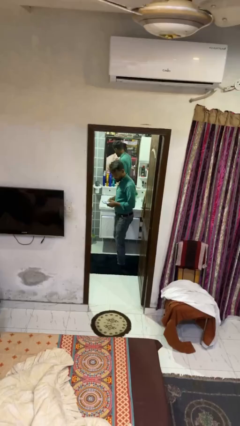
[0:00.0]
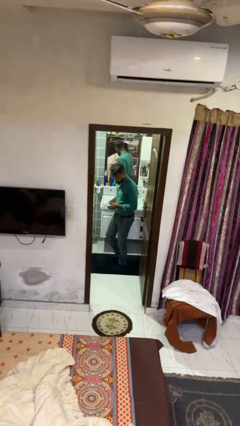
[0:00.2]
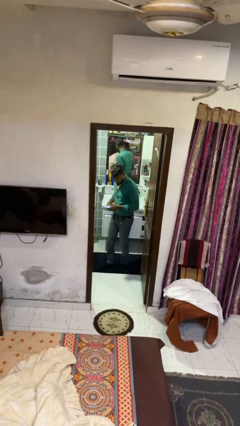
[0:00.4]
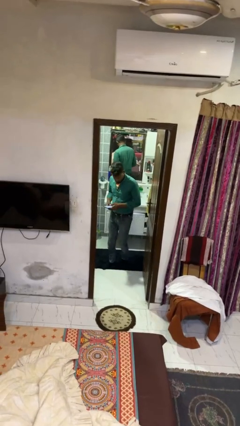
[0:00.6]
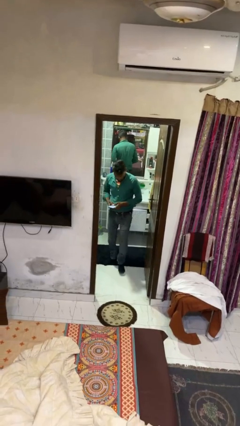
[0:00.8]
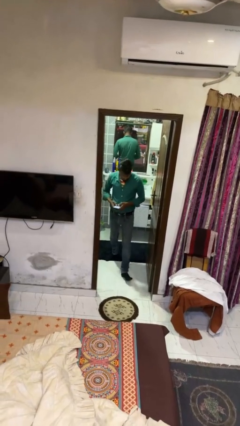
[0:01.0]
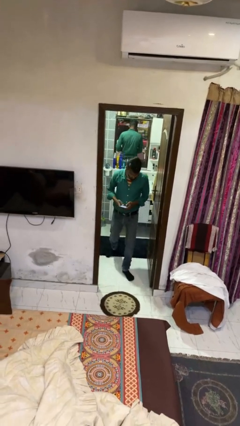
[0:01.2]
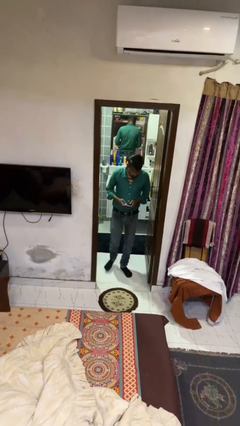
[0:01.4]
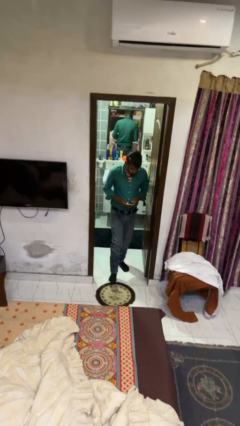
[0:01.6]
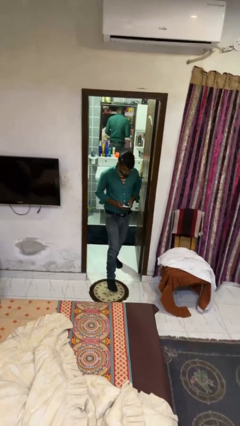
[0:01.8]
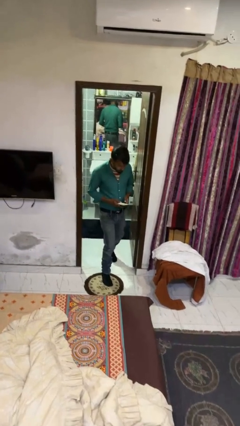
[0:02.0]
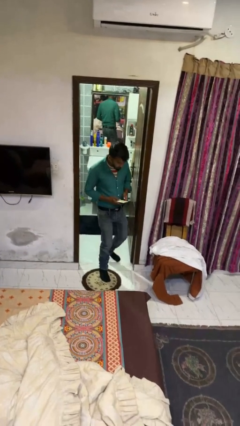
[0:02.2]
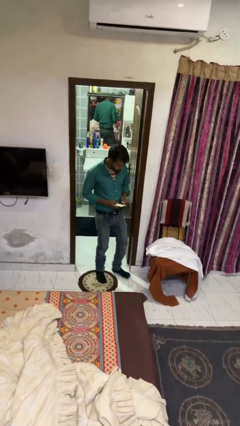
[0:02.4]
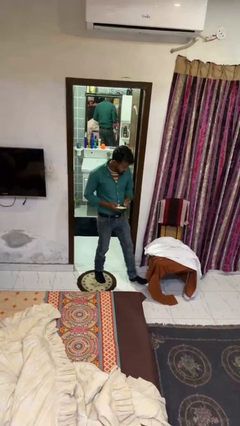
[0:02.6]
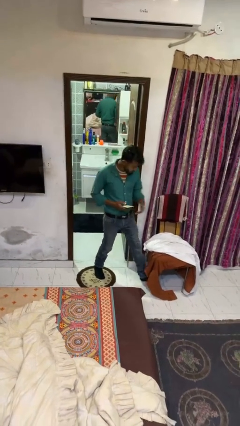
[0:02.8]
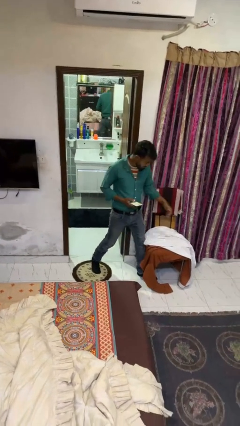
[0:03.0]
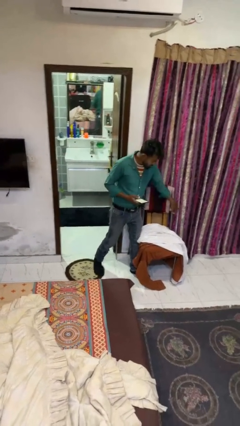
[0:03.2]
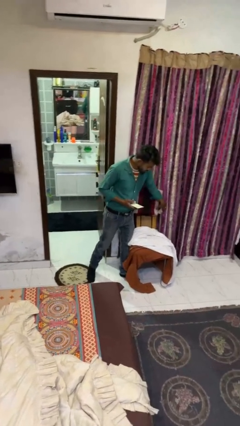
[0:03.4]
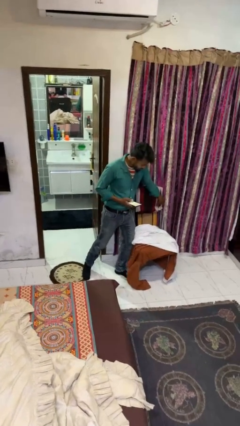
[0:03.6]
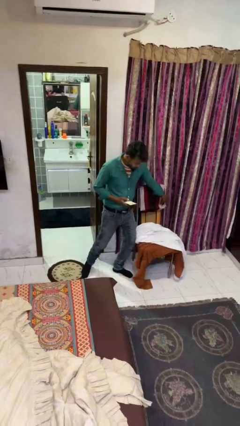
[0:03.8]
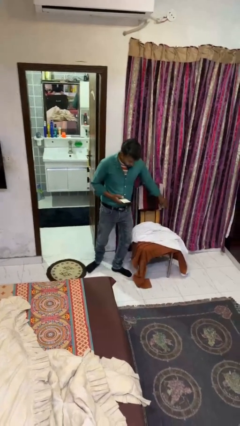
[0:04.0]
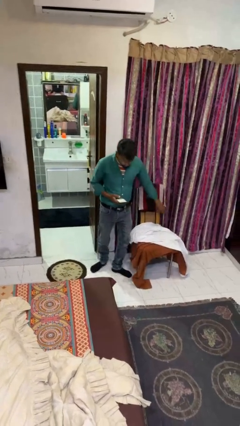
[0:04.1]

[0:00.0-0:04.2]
person enters scene through structure

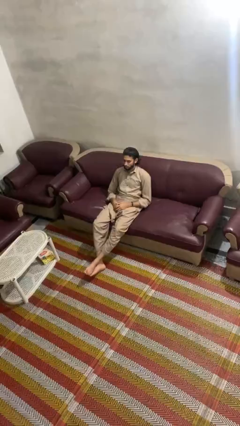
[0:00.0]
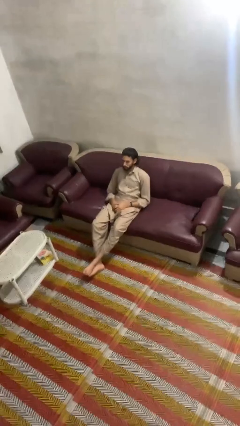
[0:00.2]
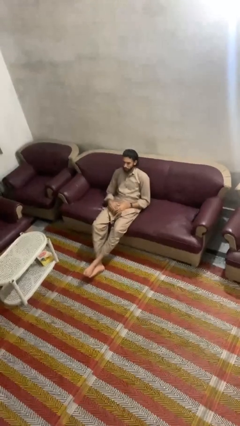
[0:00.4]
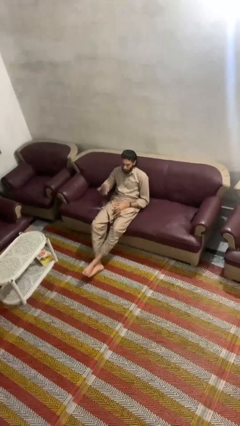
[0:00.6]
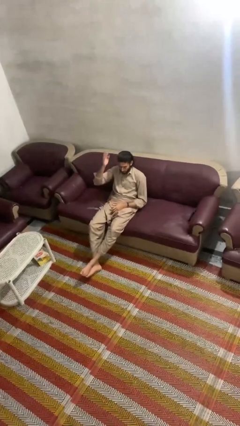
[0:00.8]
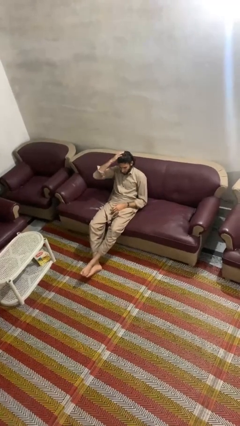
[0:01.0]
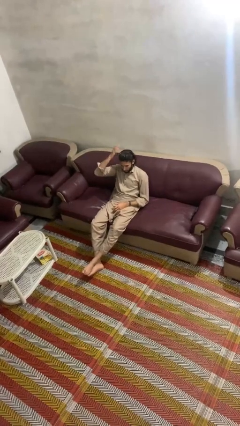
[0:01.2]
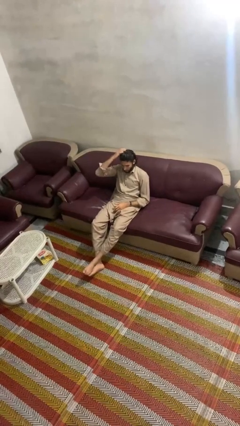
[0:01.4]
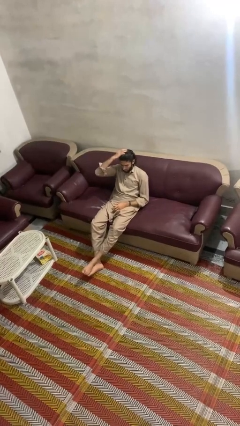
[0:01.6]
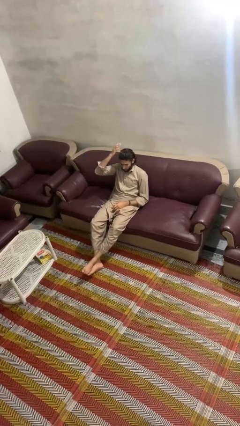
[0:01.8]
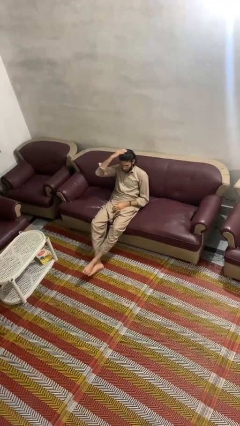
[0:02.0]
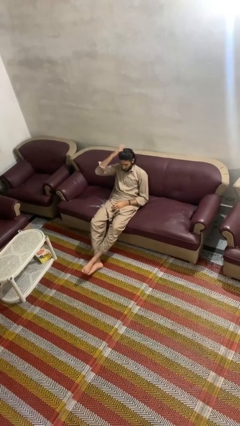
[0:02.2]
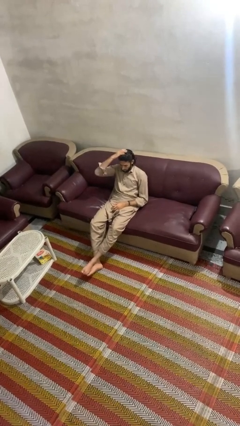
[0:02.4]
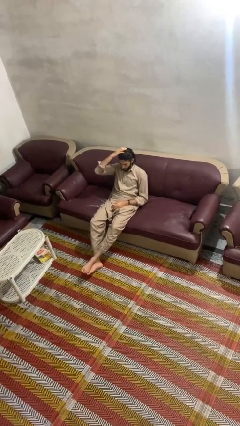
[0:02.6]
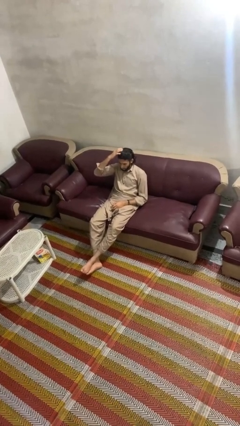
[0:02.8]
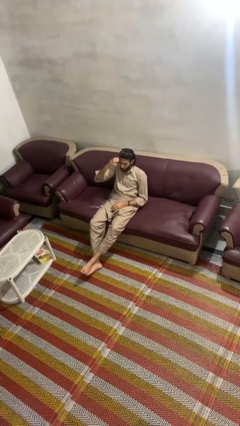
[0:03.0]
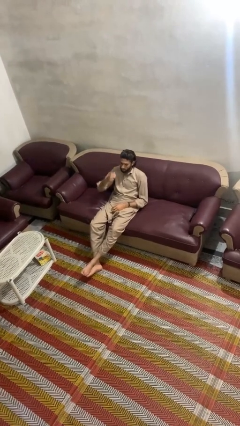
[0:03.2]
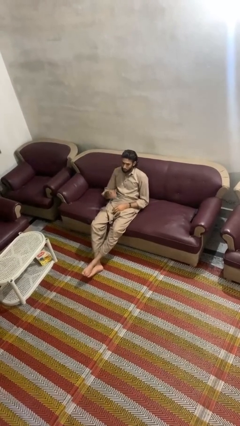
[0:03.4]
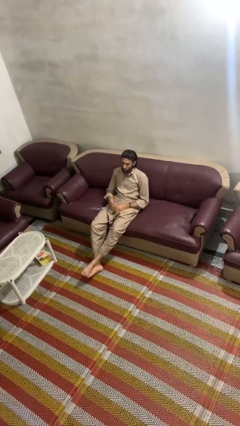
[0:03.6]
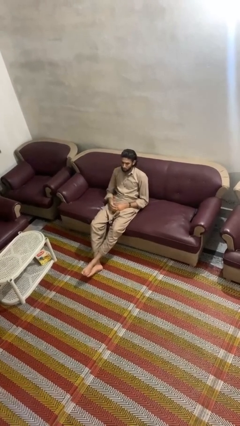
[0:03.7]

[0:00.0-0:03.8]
person pats head

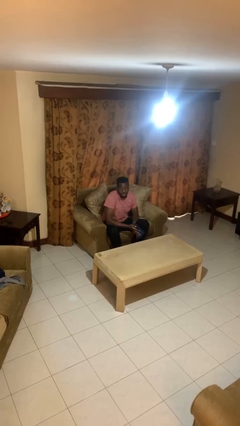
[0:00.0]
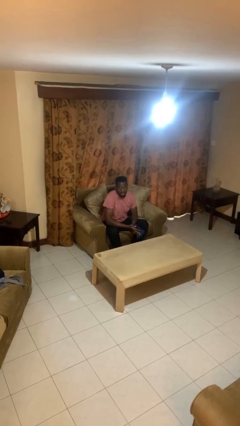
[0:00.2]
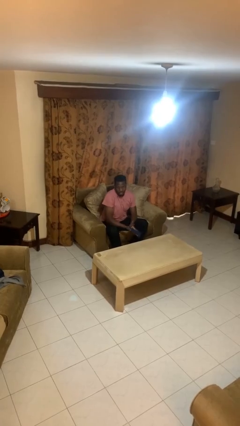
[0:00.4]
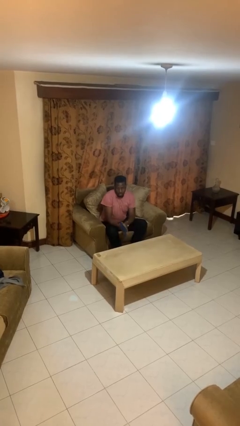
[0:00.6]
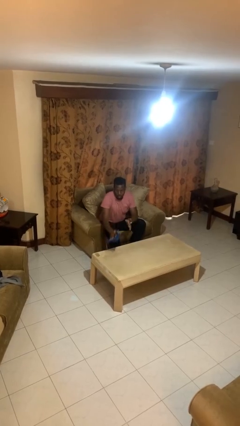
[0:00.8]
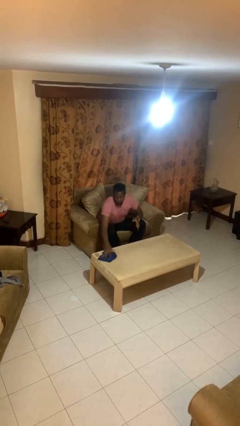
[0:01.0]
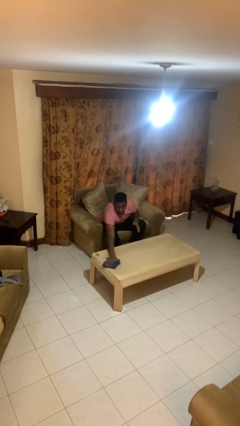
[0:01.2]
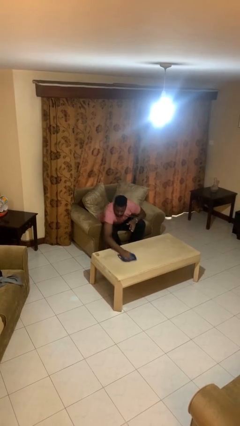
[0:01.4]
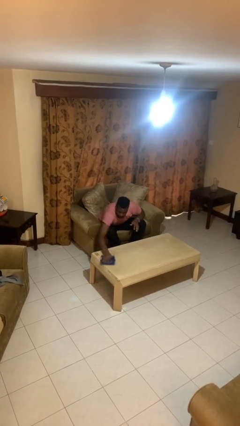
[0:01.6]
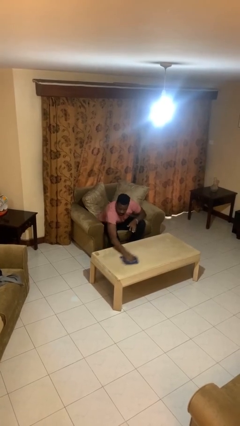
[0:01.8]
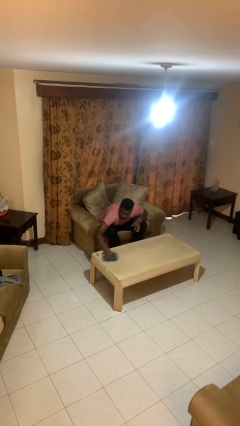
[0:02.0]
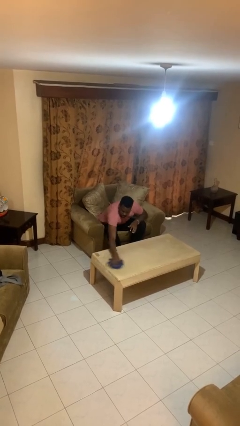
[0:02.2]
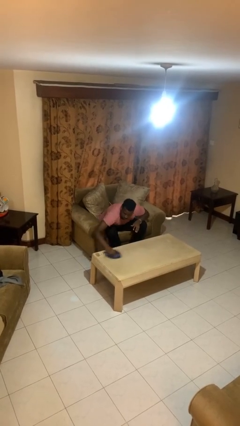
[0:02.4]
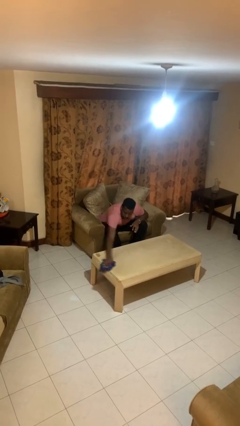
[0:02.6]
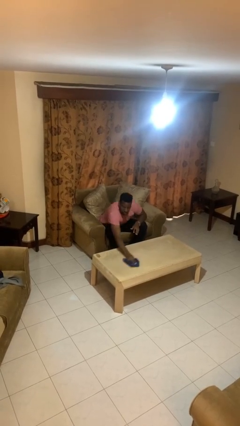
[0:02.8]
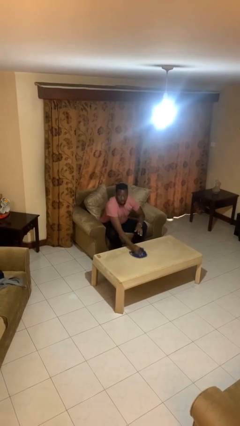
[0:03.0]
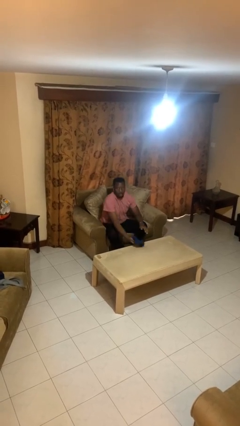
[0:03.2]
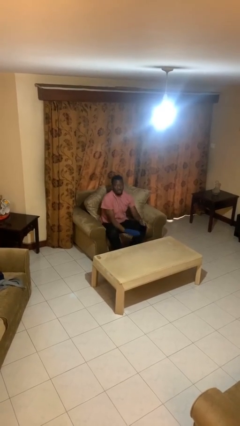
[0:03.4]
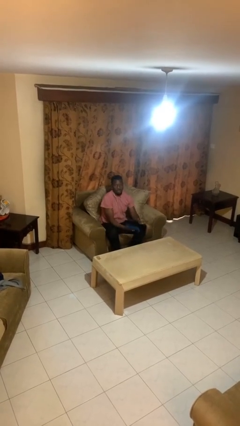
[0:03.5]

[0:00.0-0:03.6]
person cleans table with rag

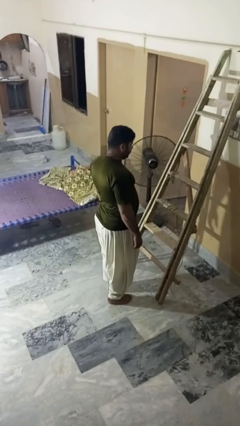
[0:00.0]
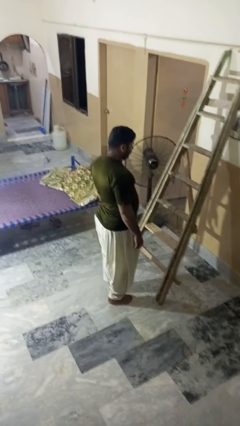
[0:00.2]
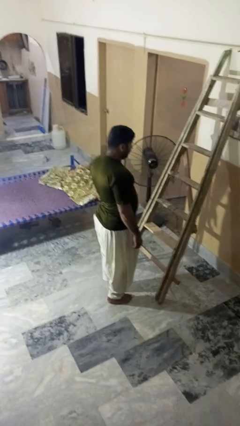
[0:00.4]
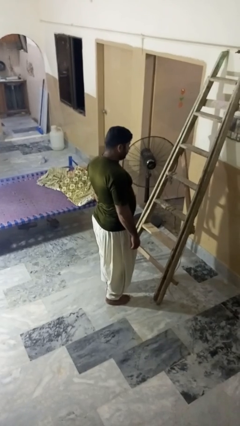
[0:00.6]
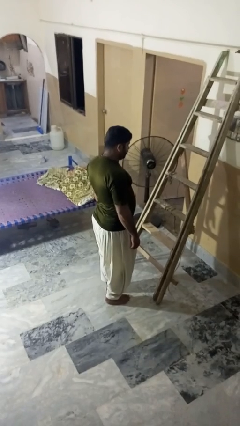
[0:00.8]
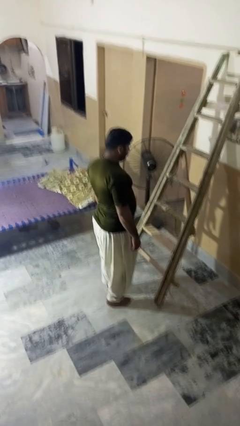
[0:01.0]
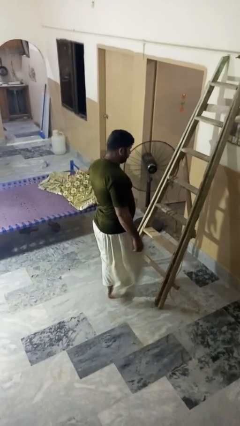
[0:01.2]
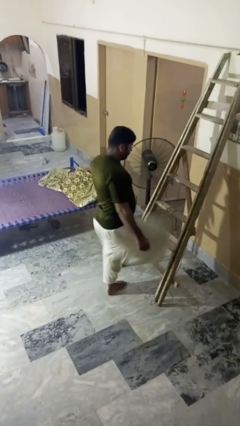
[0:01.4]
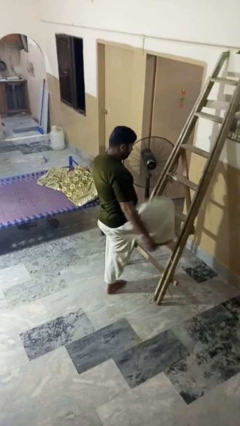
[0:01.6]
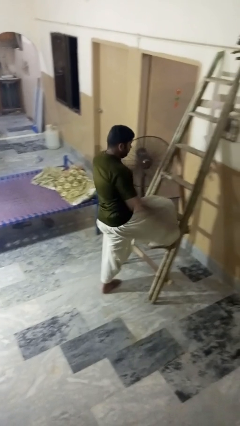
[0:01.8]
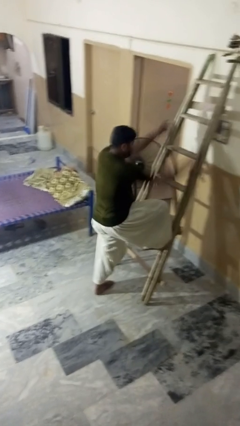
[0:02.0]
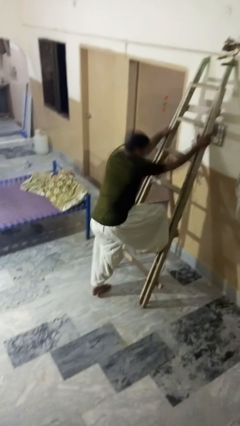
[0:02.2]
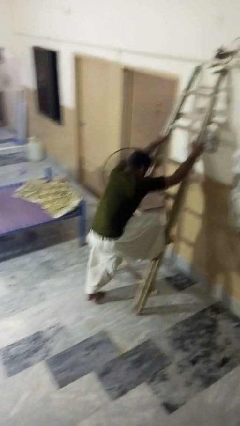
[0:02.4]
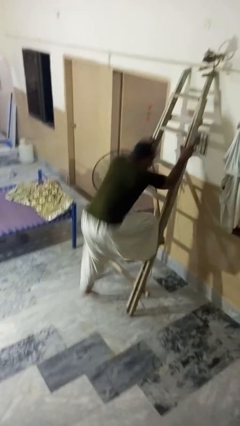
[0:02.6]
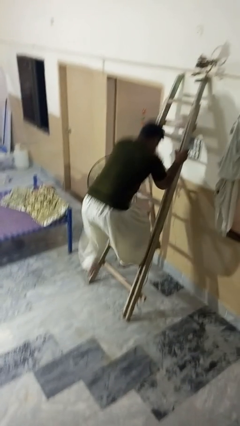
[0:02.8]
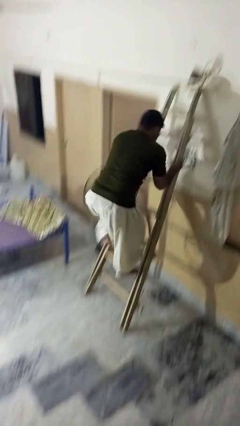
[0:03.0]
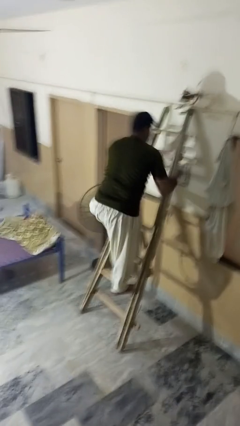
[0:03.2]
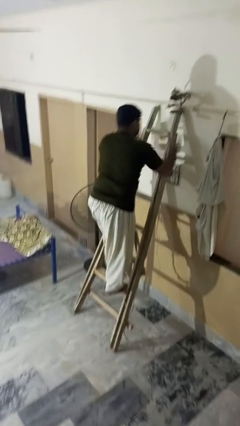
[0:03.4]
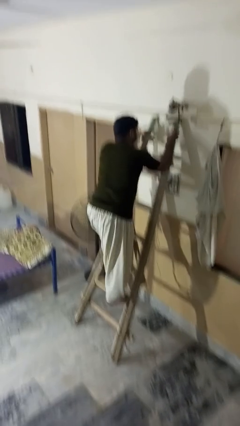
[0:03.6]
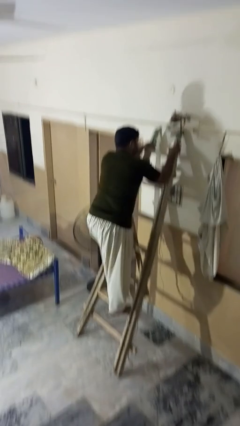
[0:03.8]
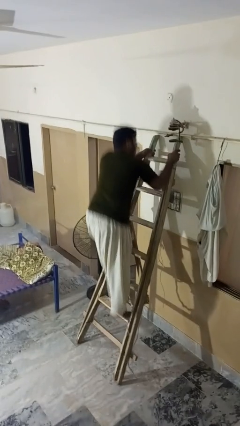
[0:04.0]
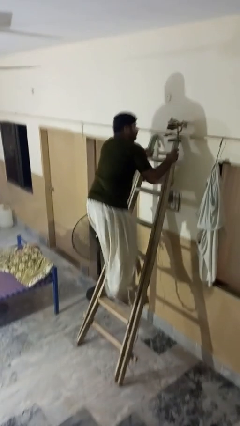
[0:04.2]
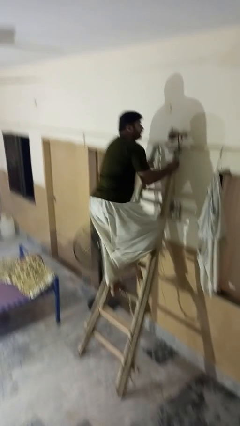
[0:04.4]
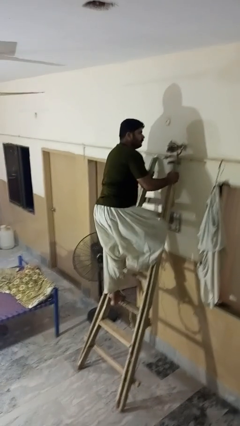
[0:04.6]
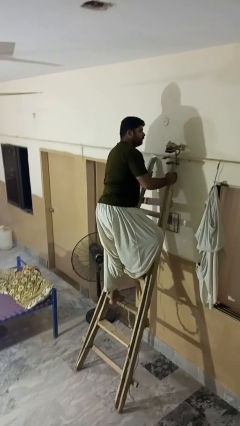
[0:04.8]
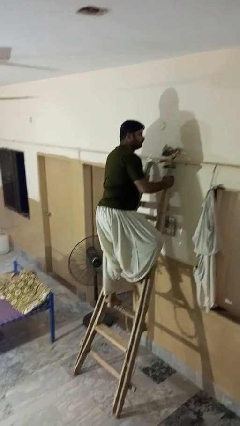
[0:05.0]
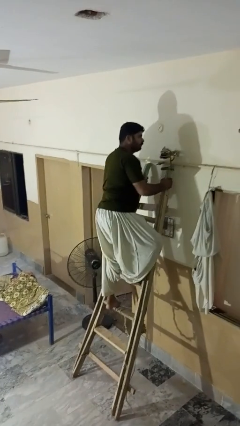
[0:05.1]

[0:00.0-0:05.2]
person climbs up ladder

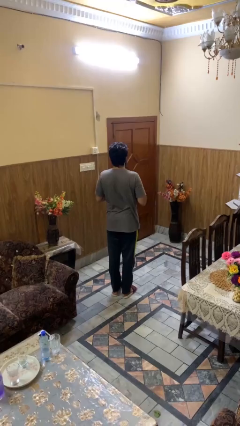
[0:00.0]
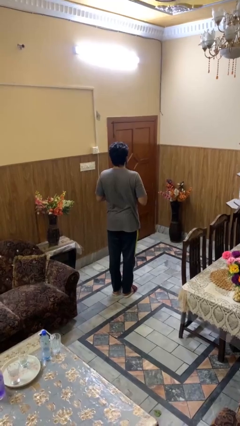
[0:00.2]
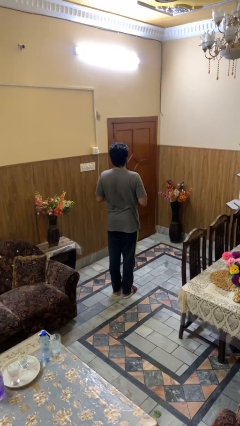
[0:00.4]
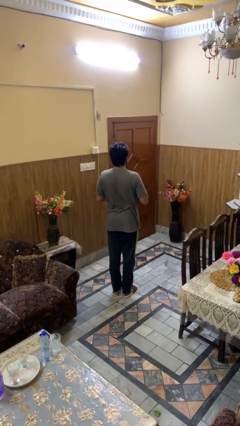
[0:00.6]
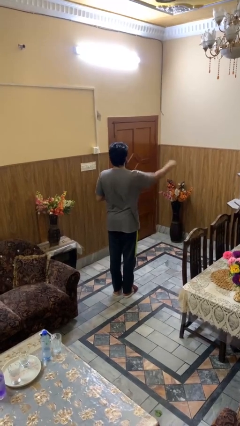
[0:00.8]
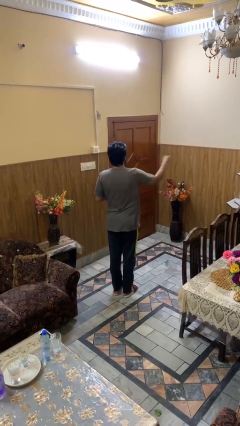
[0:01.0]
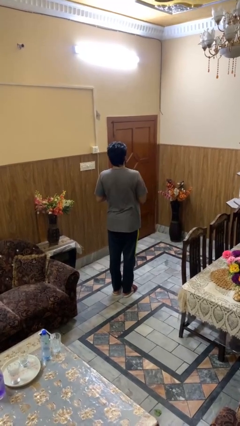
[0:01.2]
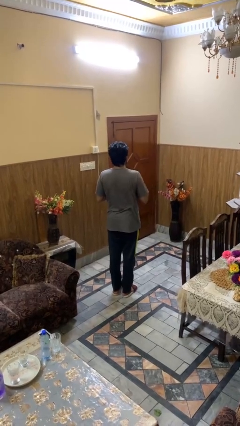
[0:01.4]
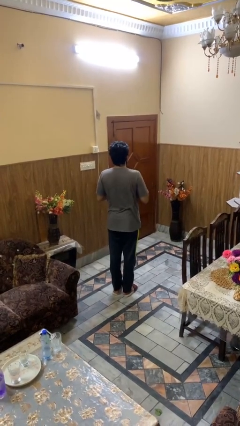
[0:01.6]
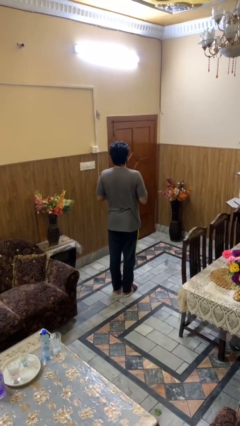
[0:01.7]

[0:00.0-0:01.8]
person punches
